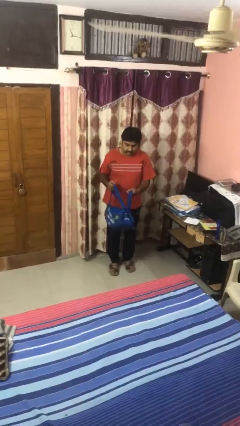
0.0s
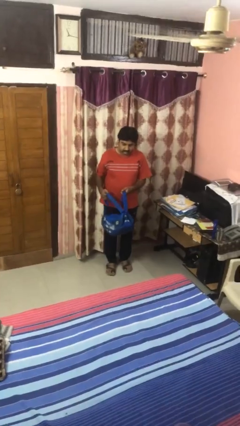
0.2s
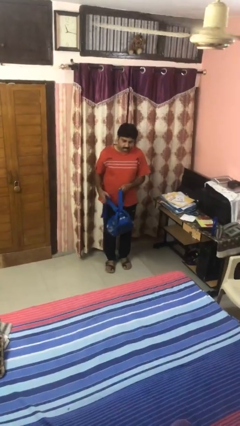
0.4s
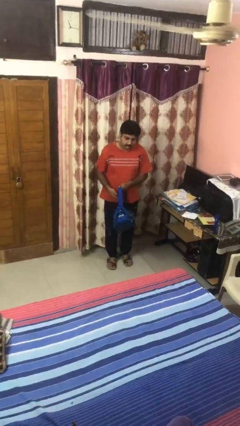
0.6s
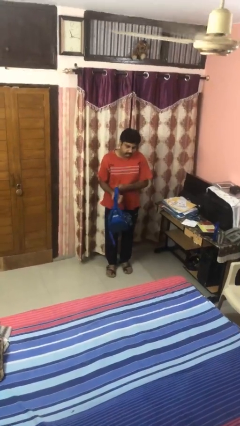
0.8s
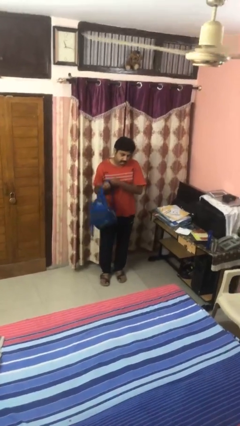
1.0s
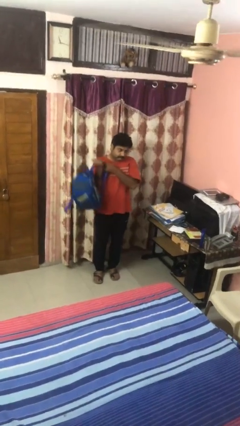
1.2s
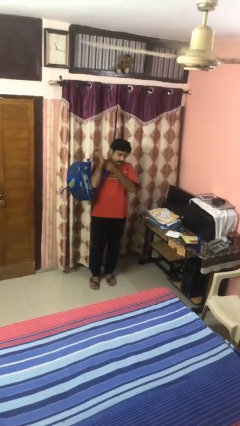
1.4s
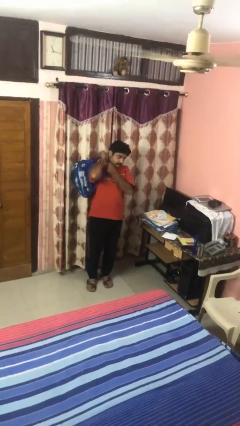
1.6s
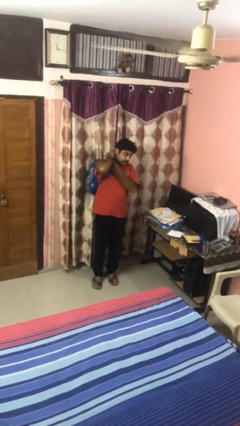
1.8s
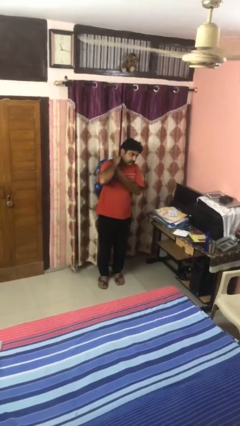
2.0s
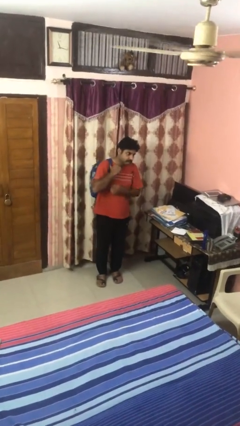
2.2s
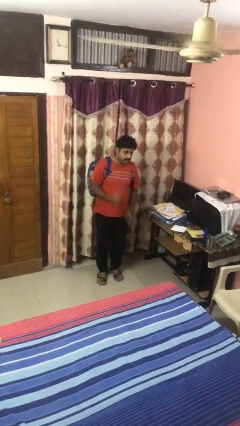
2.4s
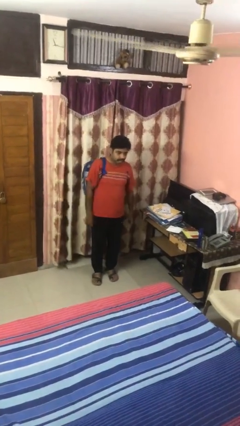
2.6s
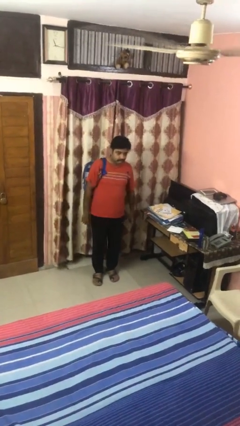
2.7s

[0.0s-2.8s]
person puts on backpack

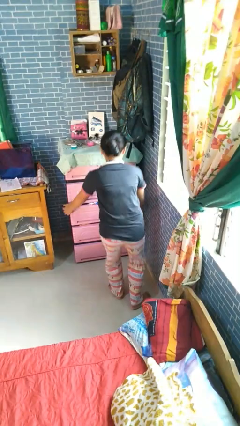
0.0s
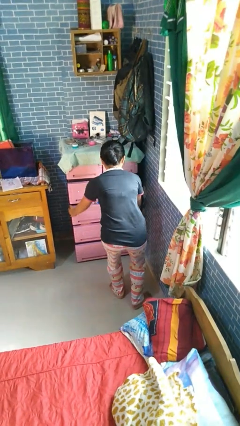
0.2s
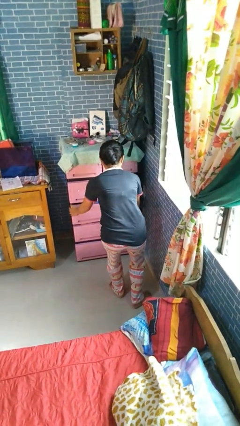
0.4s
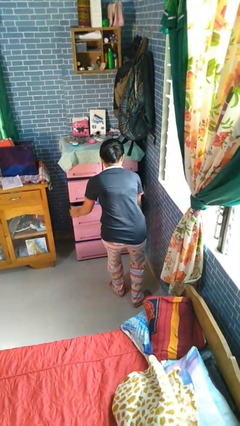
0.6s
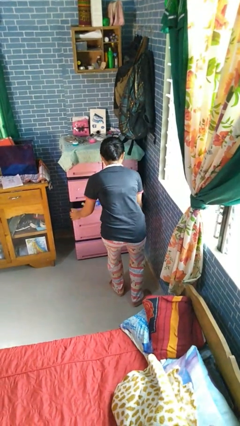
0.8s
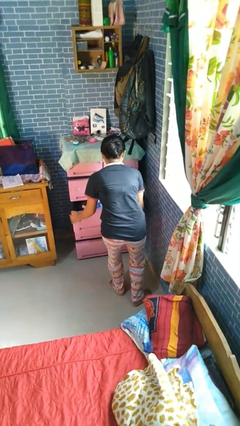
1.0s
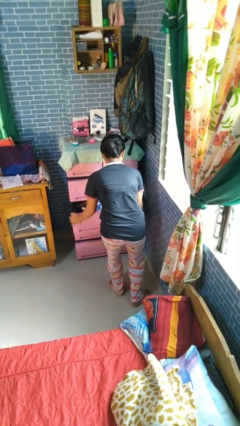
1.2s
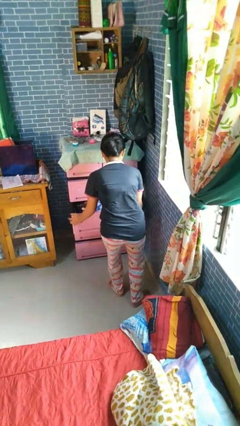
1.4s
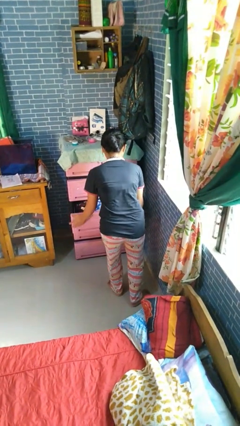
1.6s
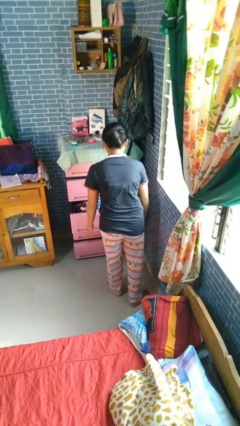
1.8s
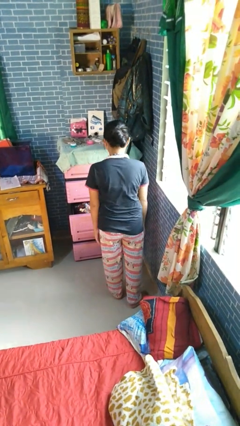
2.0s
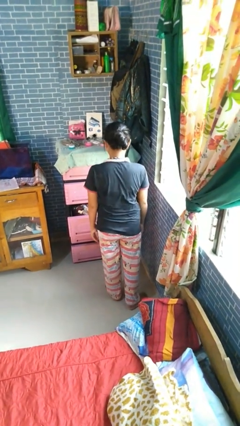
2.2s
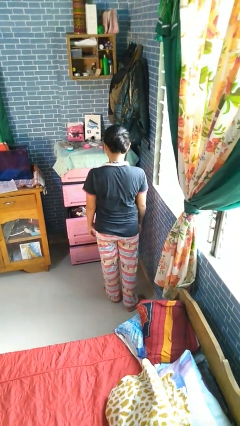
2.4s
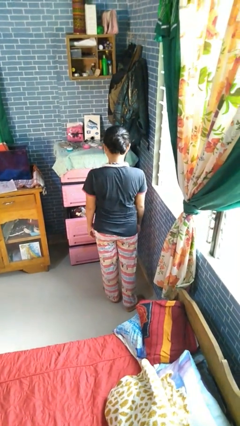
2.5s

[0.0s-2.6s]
person opens dresser drawer

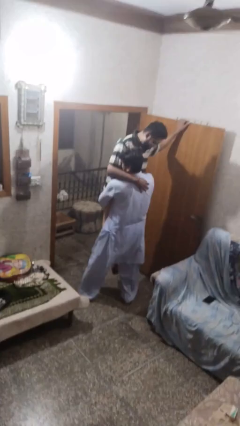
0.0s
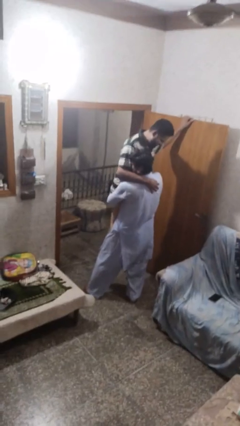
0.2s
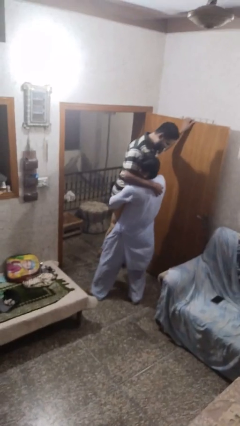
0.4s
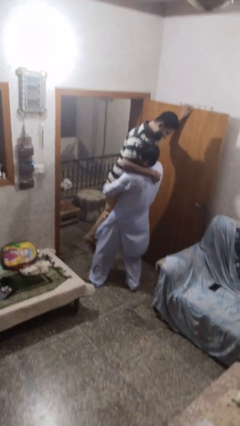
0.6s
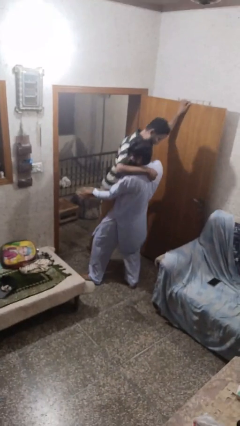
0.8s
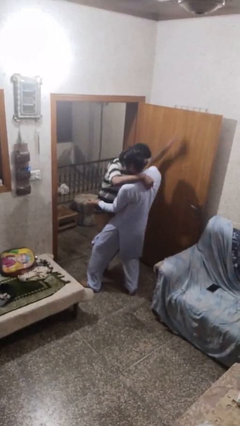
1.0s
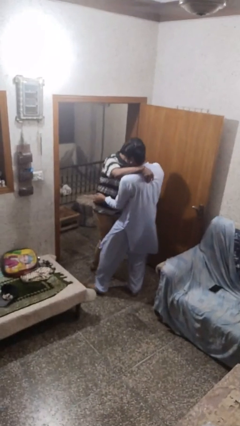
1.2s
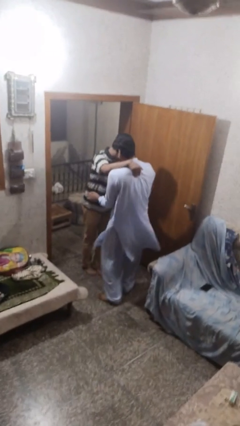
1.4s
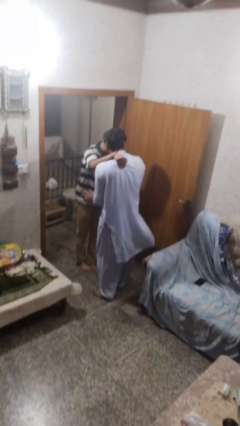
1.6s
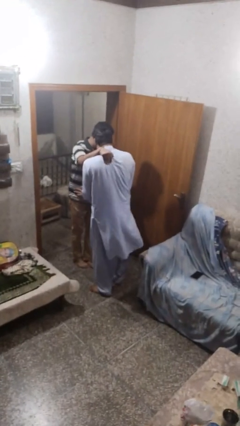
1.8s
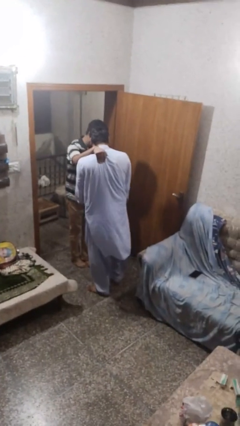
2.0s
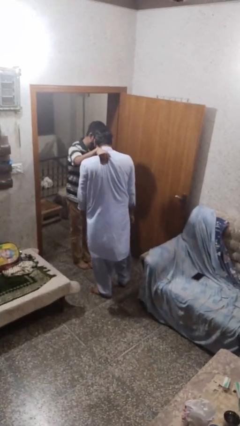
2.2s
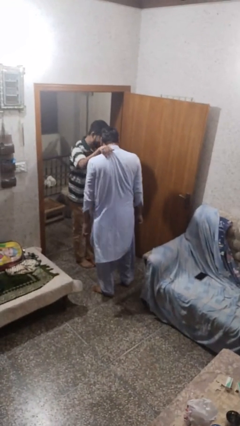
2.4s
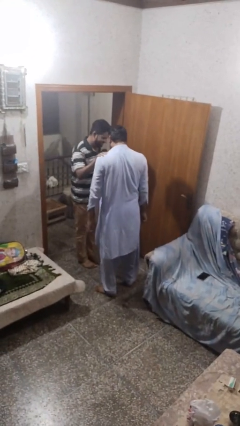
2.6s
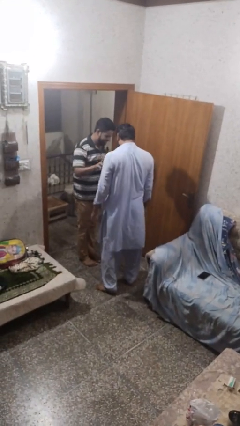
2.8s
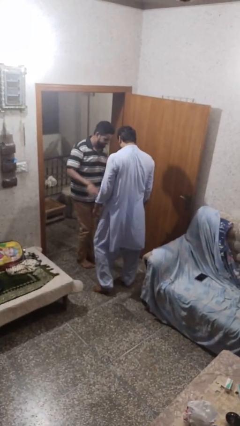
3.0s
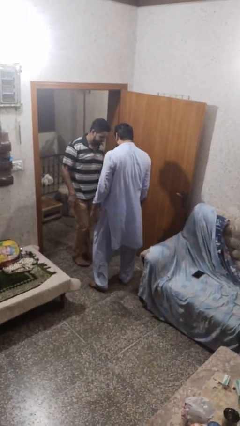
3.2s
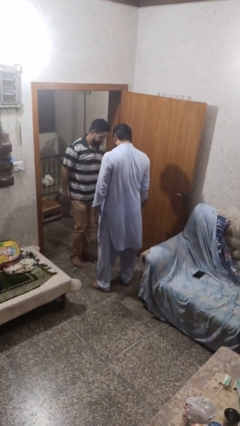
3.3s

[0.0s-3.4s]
person puts down person

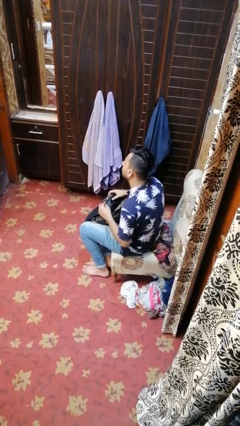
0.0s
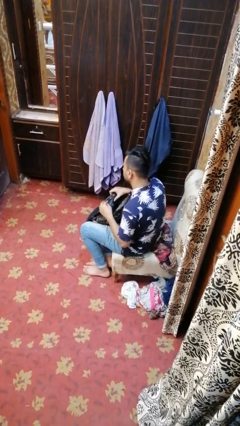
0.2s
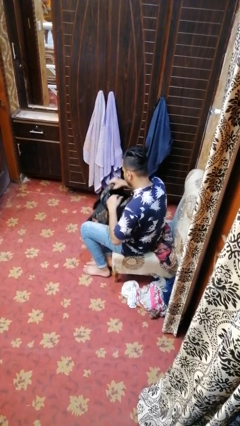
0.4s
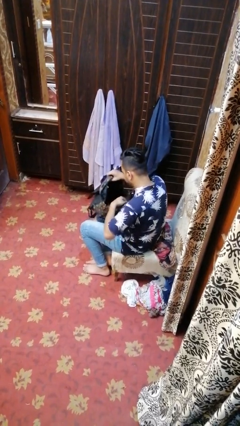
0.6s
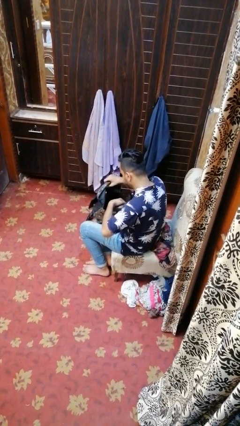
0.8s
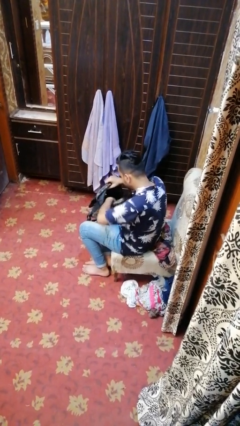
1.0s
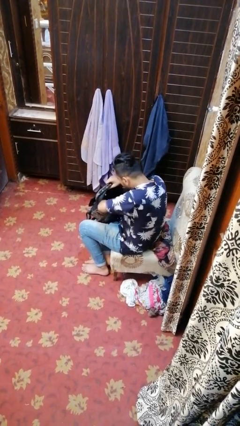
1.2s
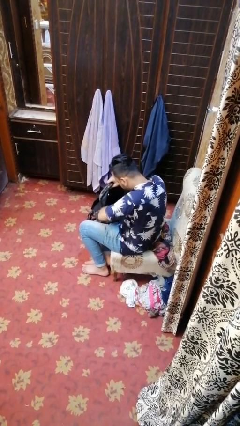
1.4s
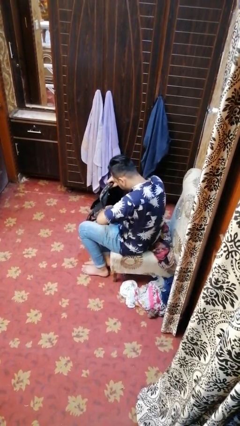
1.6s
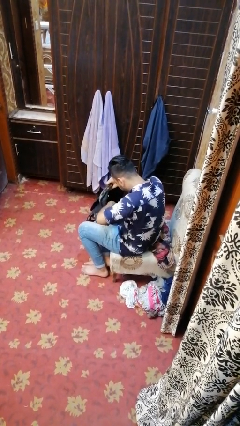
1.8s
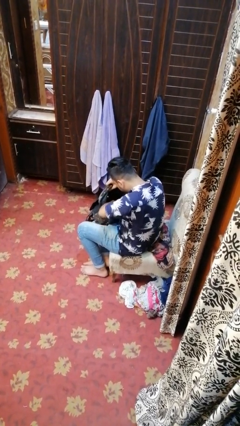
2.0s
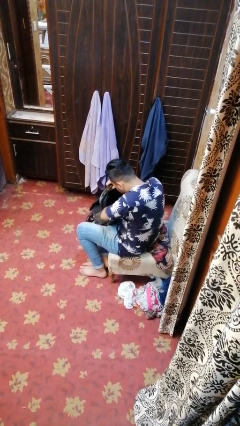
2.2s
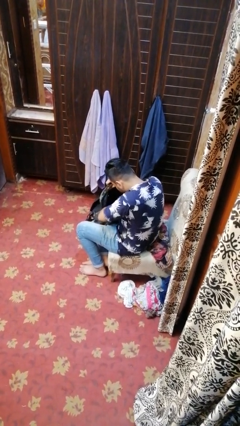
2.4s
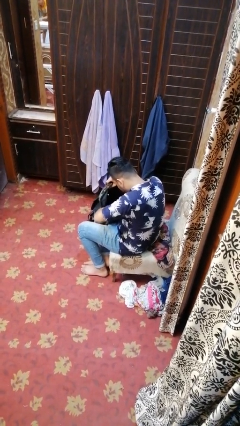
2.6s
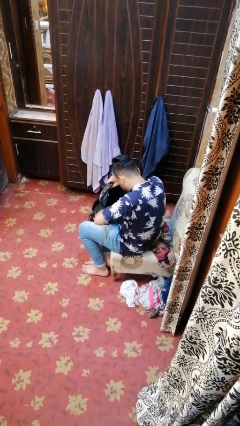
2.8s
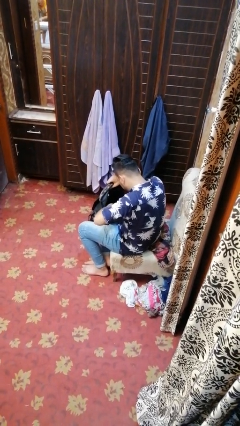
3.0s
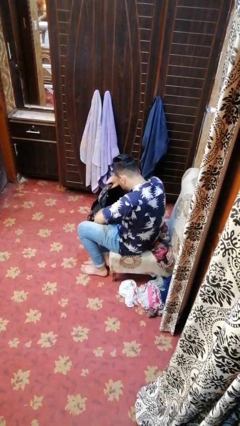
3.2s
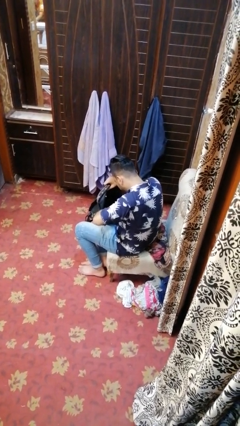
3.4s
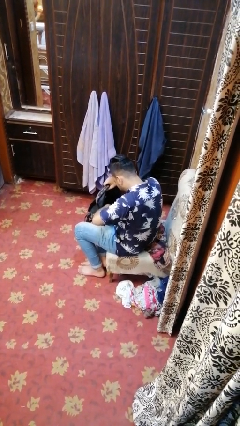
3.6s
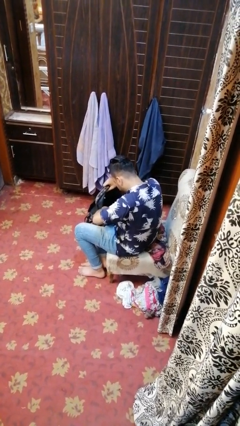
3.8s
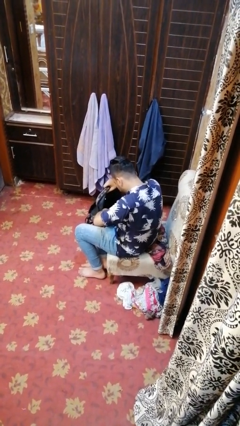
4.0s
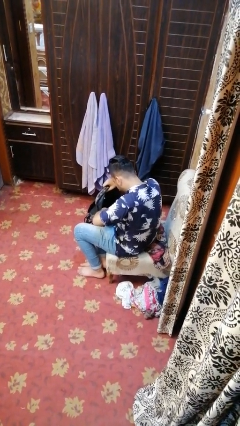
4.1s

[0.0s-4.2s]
person searches in backpack

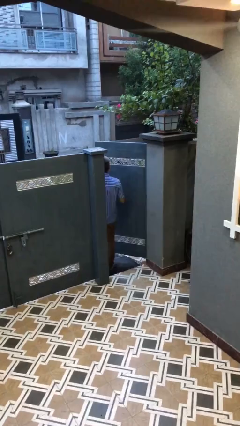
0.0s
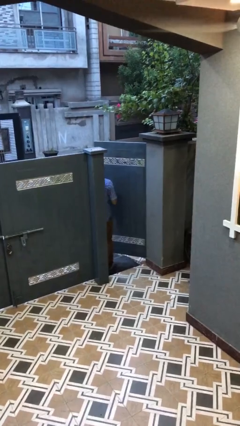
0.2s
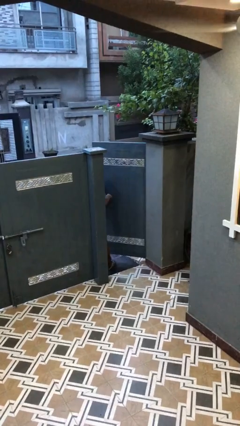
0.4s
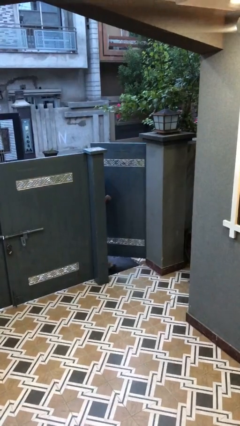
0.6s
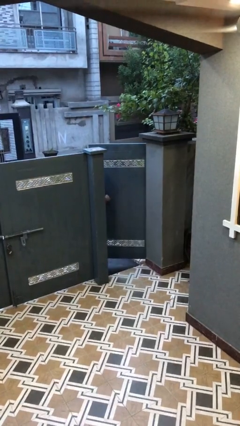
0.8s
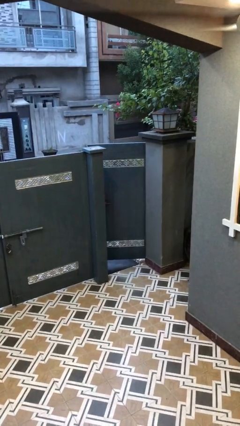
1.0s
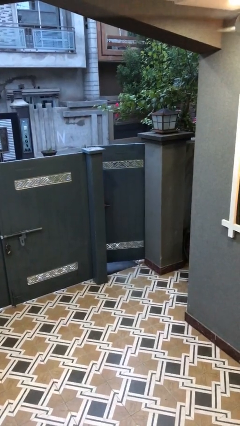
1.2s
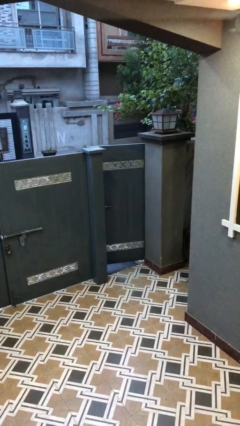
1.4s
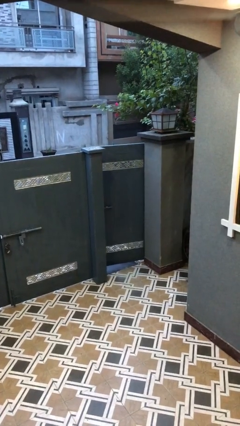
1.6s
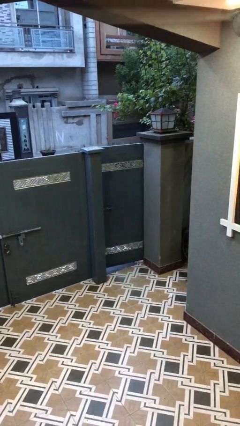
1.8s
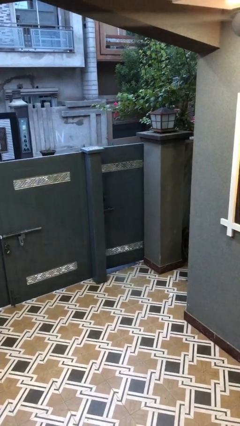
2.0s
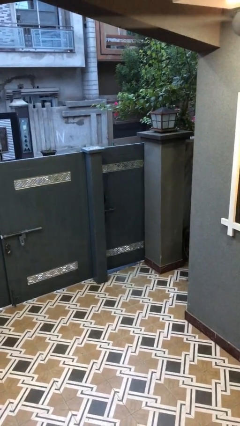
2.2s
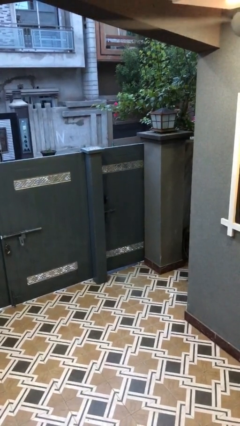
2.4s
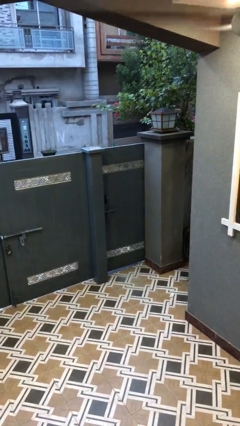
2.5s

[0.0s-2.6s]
person closes facility door

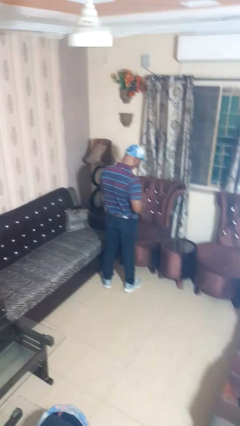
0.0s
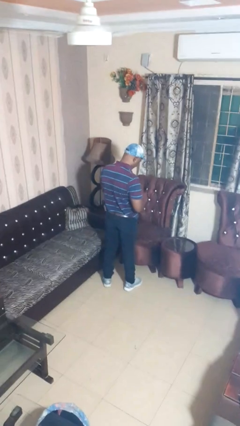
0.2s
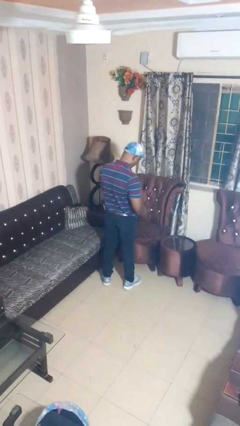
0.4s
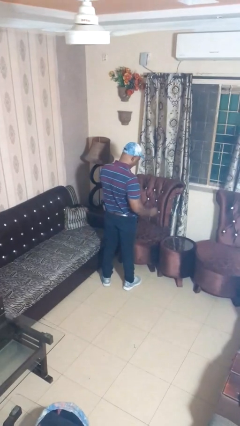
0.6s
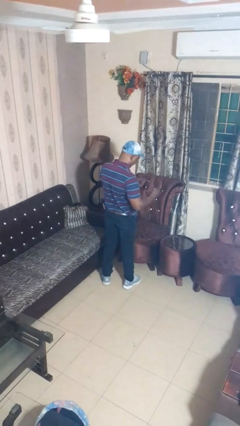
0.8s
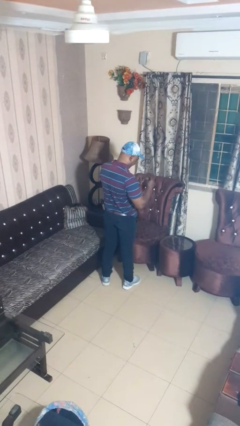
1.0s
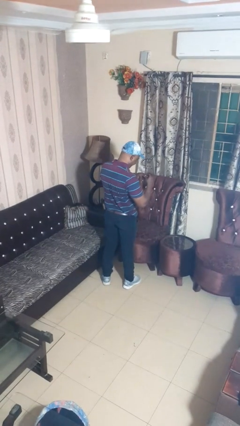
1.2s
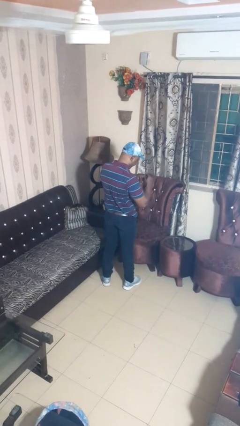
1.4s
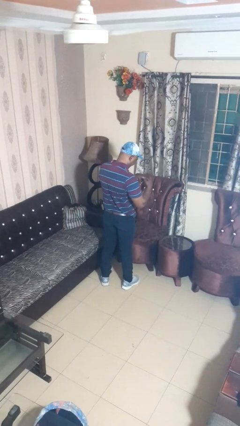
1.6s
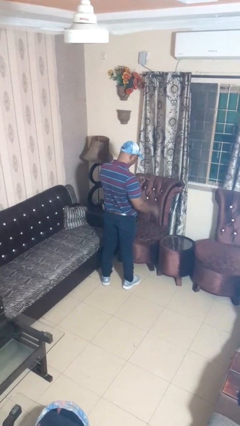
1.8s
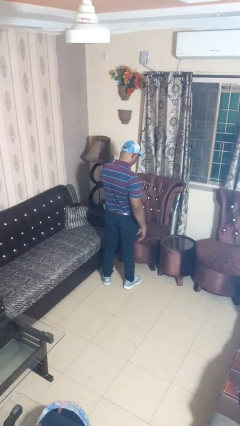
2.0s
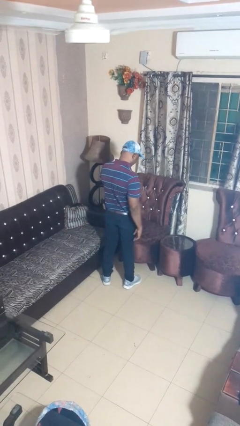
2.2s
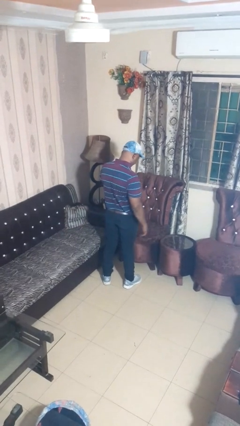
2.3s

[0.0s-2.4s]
person puts on ring
